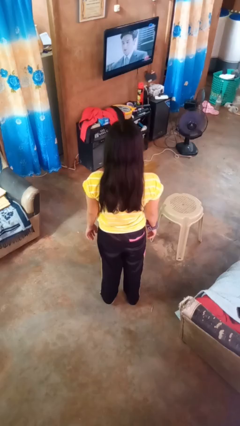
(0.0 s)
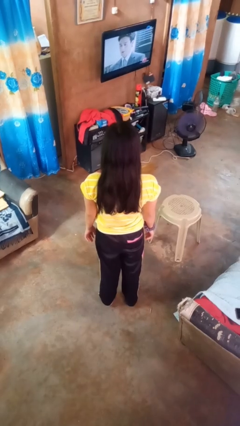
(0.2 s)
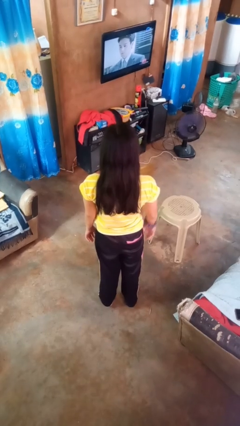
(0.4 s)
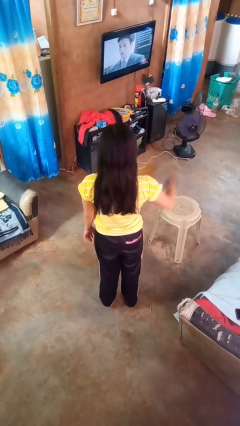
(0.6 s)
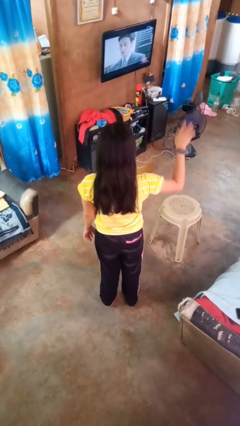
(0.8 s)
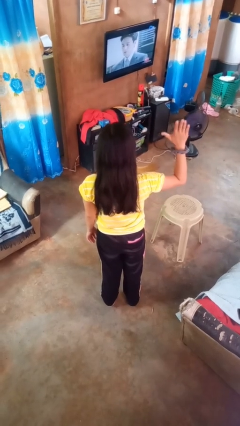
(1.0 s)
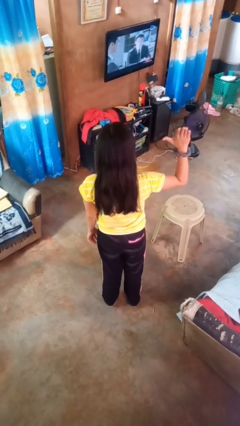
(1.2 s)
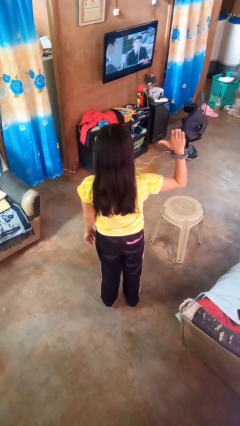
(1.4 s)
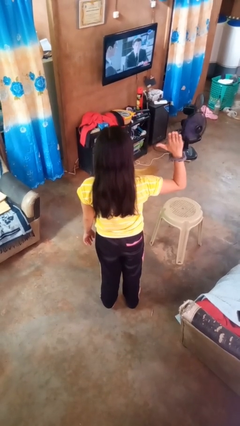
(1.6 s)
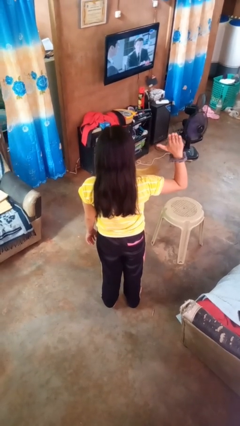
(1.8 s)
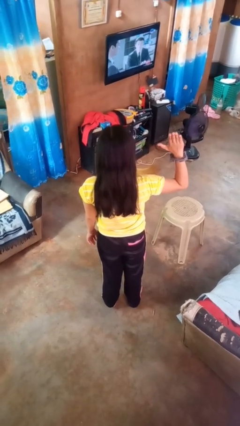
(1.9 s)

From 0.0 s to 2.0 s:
person gestures number five

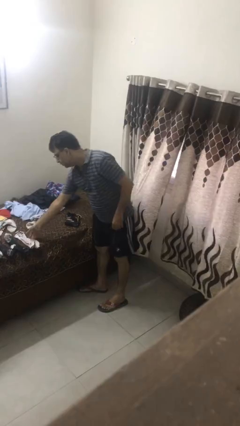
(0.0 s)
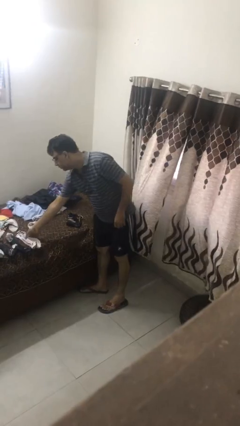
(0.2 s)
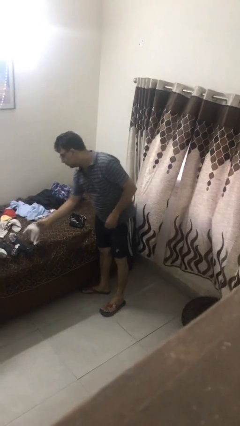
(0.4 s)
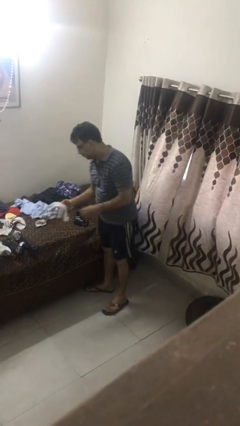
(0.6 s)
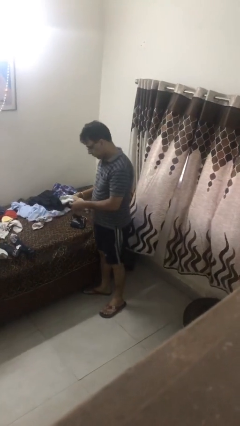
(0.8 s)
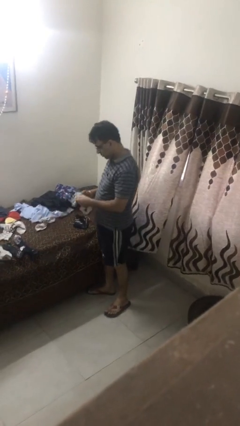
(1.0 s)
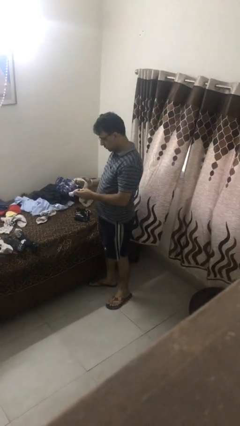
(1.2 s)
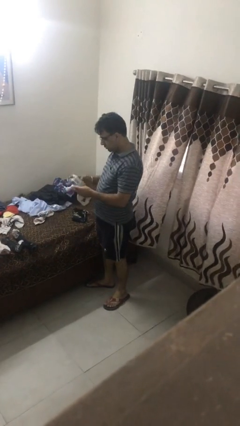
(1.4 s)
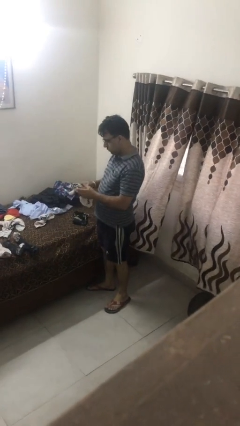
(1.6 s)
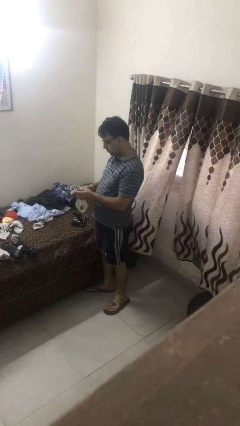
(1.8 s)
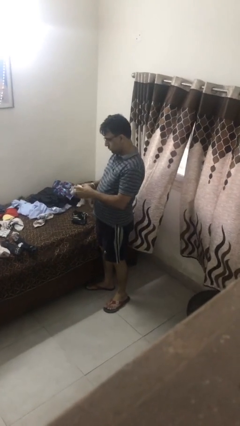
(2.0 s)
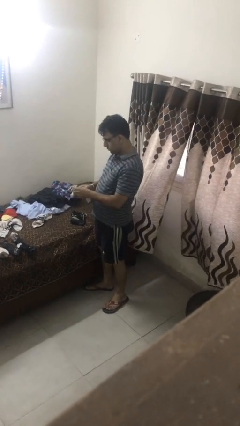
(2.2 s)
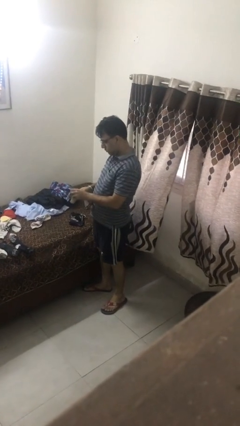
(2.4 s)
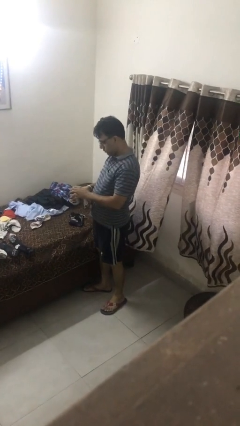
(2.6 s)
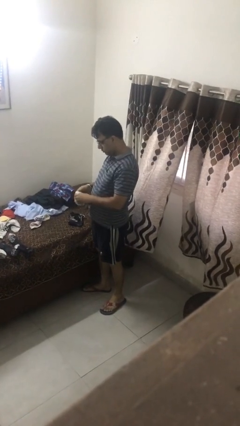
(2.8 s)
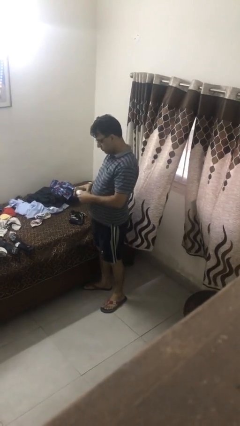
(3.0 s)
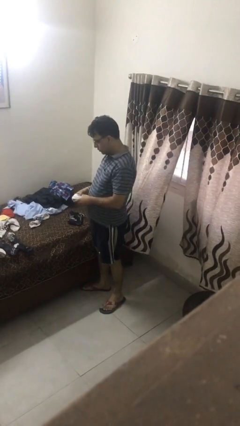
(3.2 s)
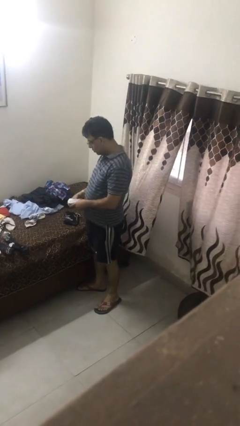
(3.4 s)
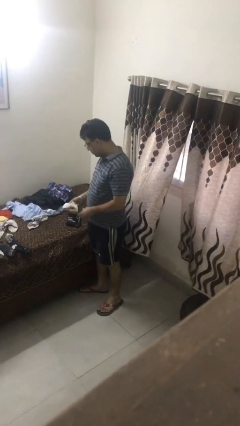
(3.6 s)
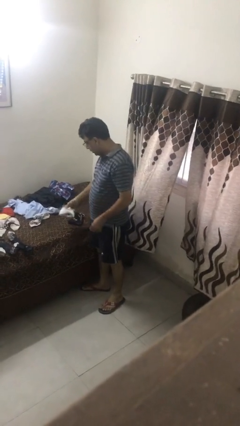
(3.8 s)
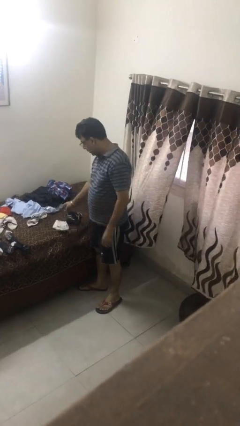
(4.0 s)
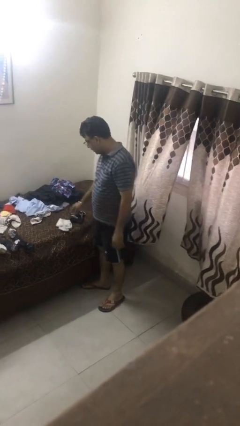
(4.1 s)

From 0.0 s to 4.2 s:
person folds socks

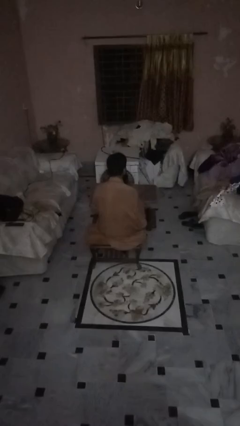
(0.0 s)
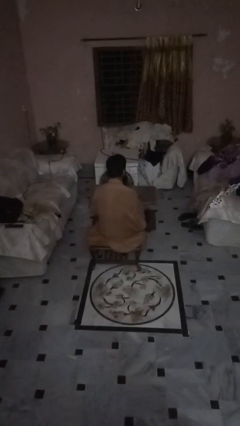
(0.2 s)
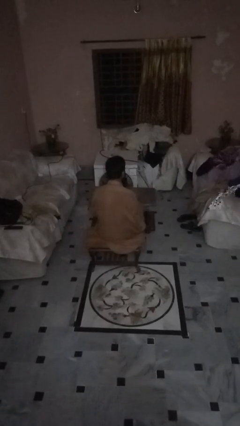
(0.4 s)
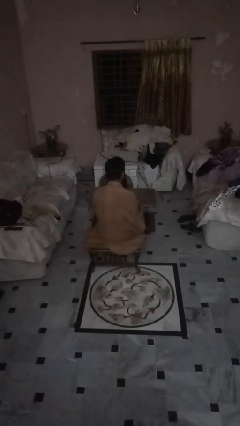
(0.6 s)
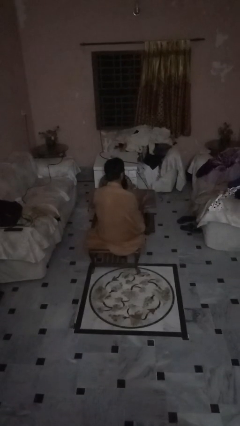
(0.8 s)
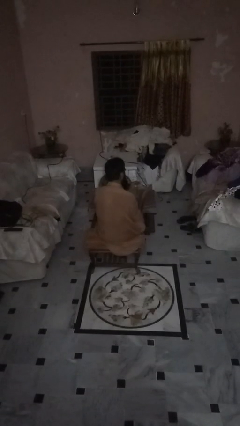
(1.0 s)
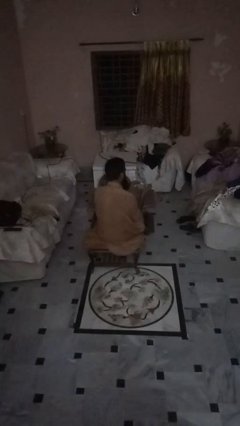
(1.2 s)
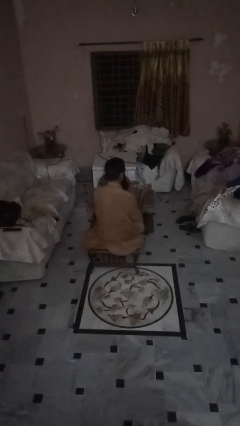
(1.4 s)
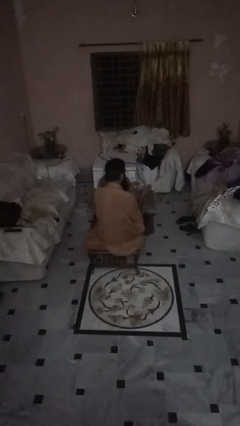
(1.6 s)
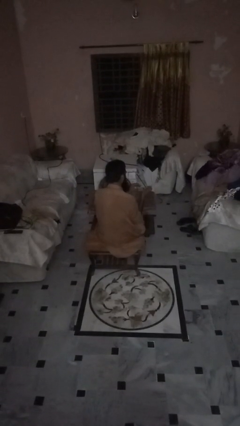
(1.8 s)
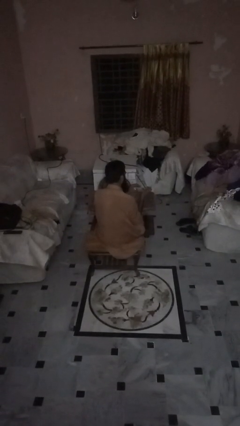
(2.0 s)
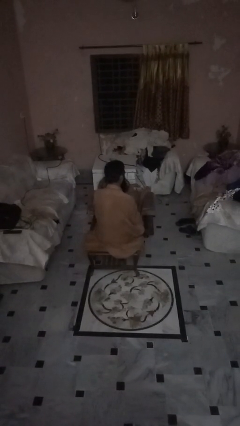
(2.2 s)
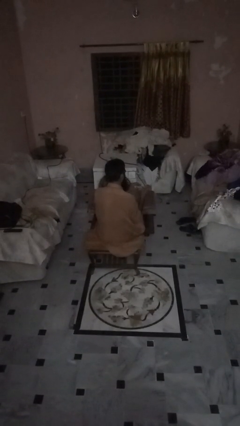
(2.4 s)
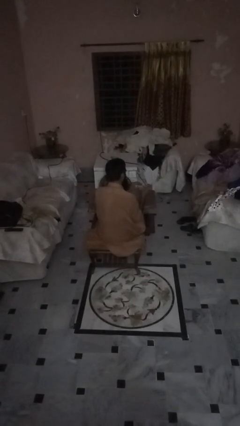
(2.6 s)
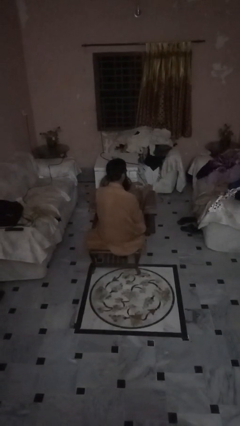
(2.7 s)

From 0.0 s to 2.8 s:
person clips fingernails

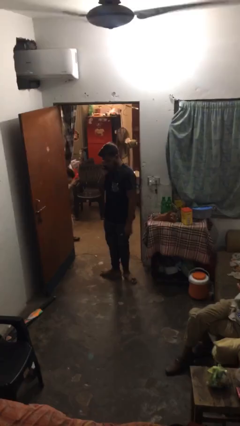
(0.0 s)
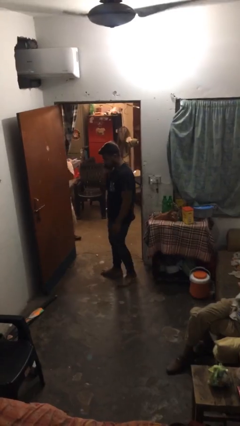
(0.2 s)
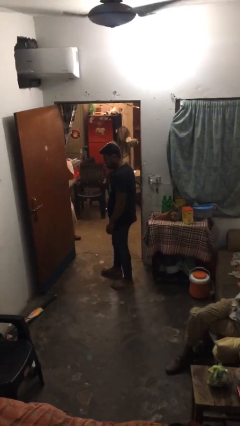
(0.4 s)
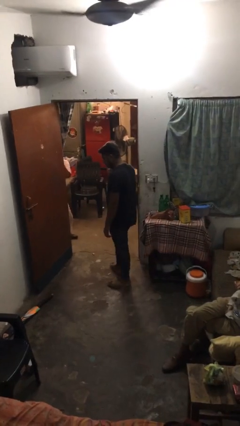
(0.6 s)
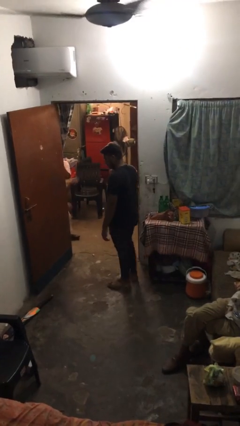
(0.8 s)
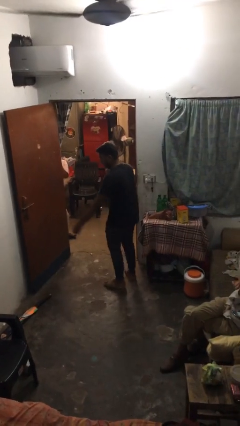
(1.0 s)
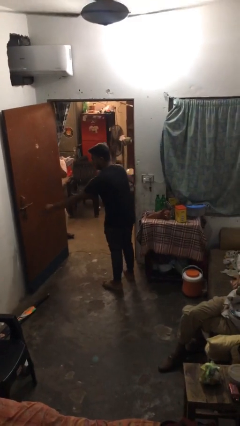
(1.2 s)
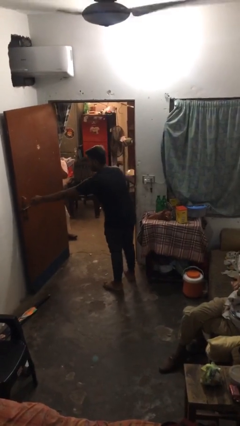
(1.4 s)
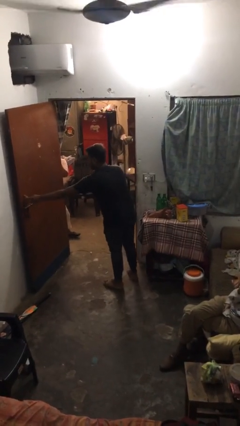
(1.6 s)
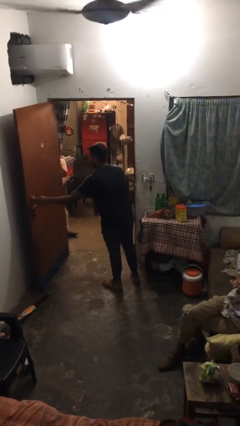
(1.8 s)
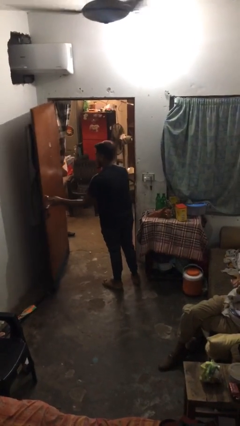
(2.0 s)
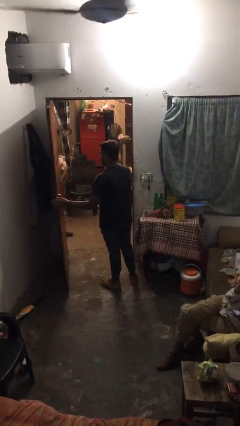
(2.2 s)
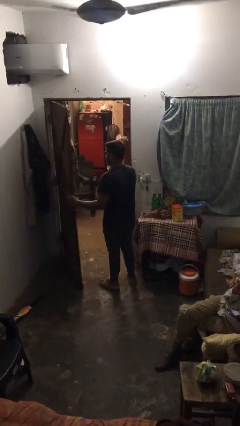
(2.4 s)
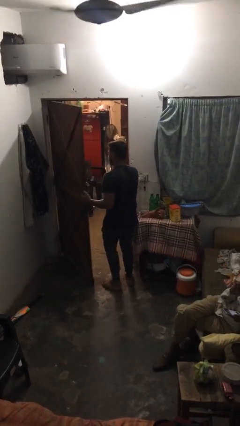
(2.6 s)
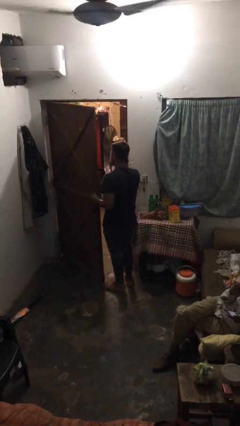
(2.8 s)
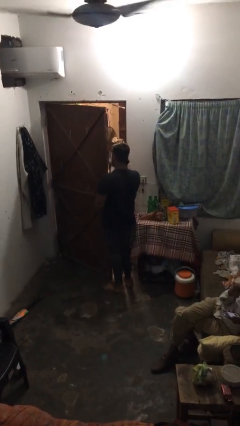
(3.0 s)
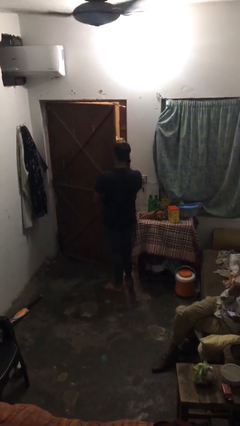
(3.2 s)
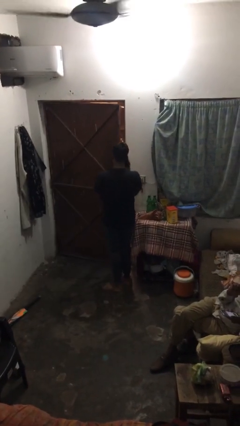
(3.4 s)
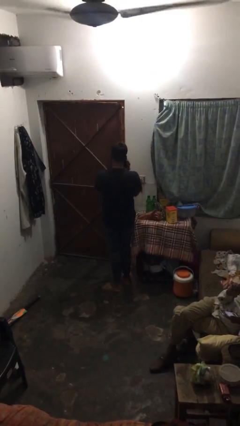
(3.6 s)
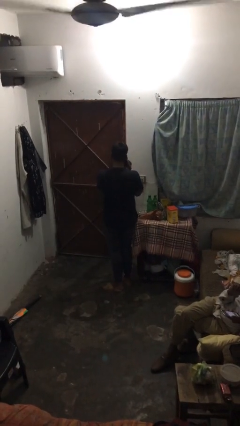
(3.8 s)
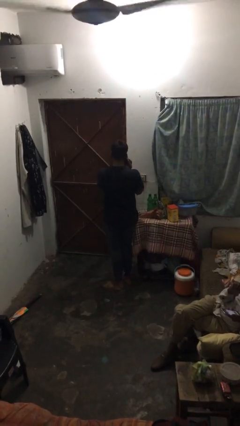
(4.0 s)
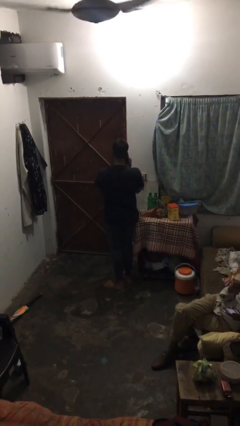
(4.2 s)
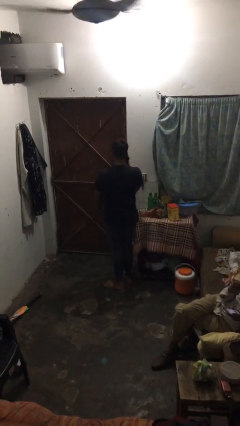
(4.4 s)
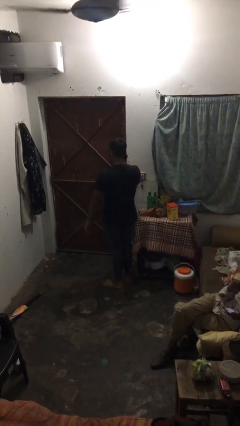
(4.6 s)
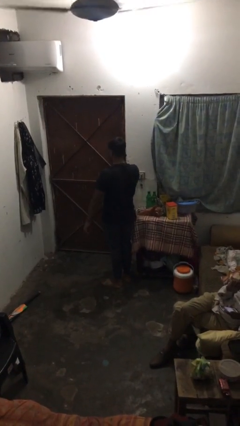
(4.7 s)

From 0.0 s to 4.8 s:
person closes facility door

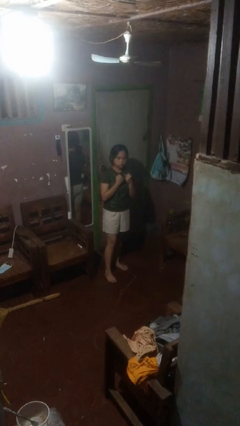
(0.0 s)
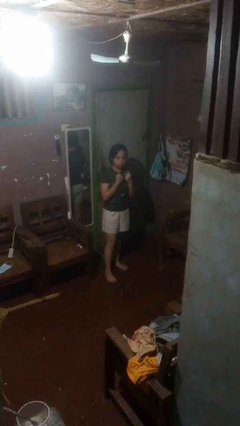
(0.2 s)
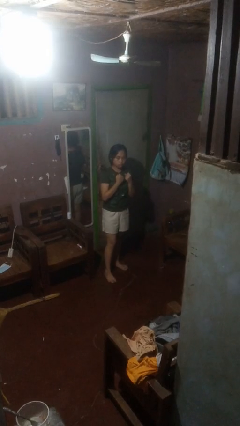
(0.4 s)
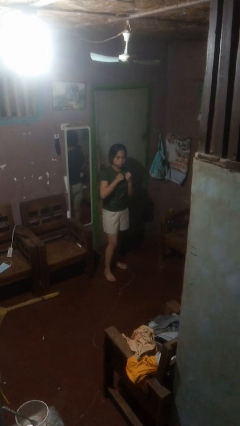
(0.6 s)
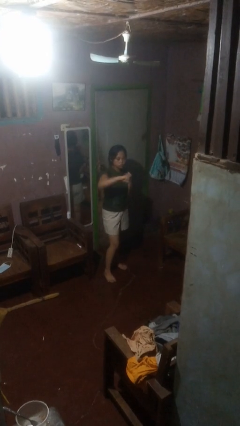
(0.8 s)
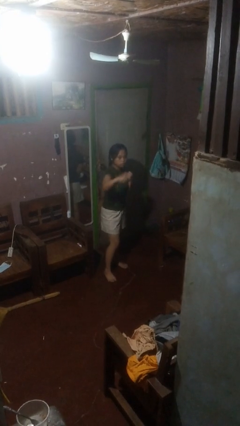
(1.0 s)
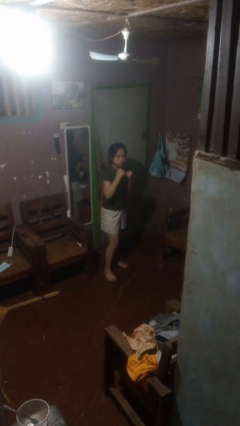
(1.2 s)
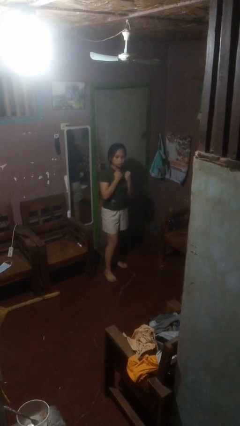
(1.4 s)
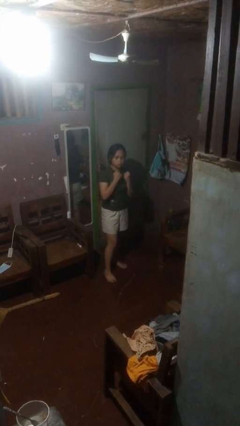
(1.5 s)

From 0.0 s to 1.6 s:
person punches

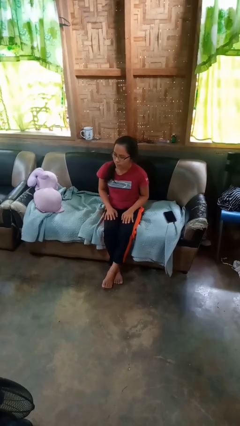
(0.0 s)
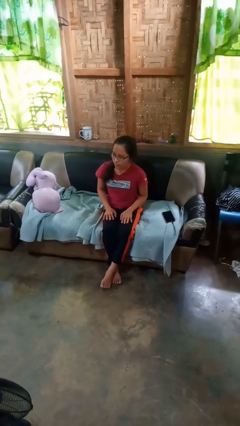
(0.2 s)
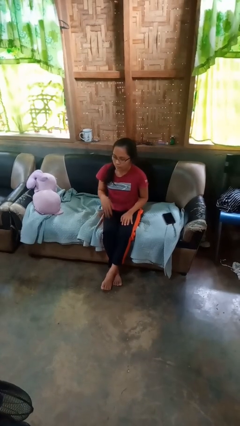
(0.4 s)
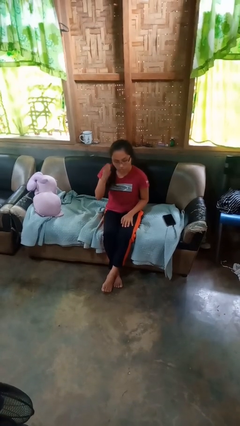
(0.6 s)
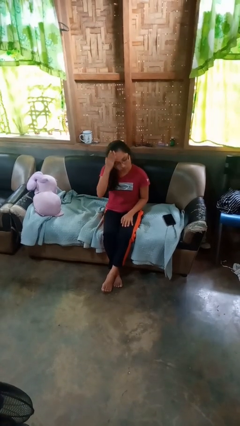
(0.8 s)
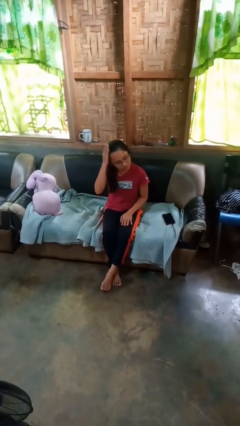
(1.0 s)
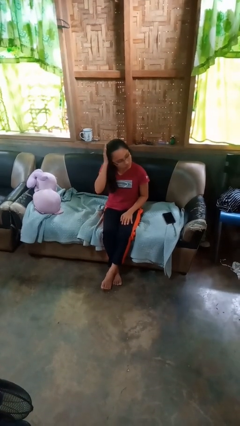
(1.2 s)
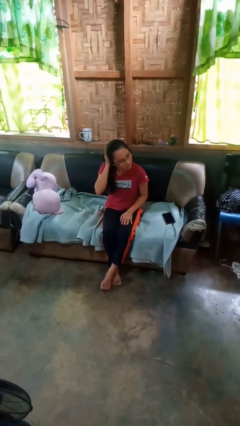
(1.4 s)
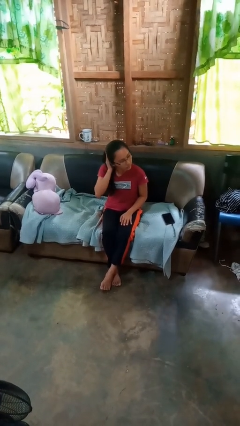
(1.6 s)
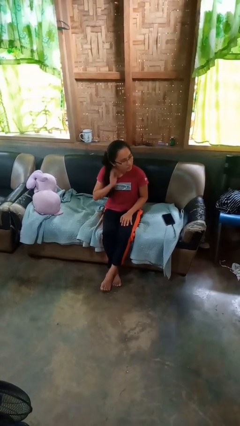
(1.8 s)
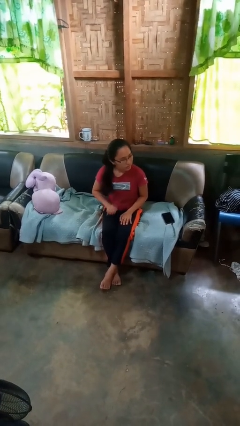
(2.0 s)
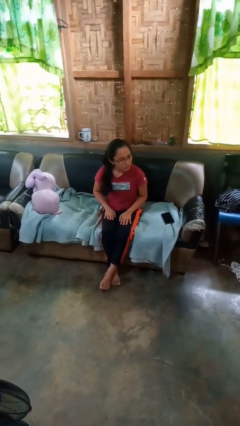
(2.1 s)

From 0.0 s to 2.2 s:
person strokes hair

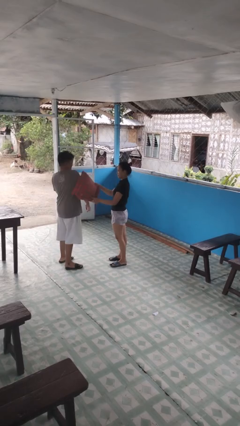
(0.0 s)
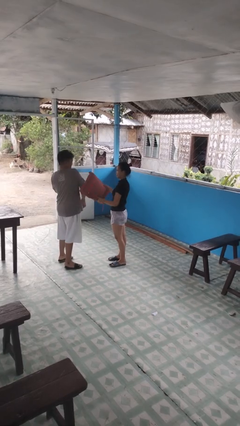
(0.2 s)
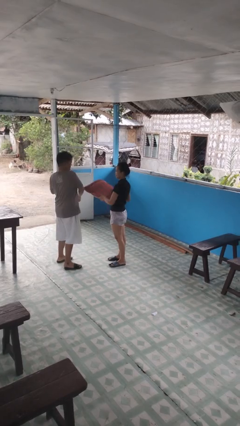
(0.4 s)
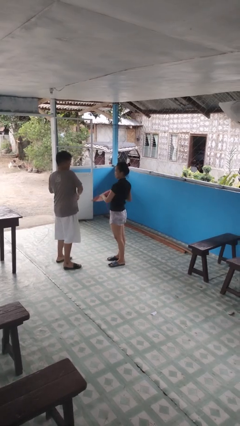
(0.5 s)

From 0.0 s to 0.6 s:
person hits person with pillow
